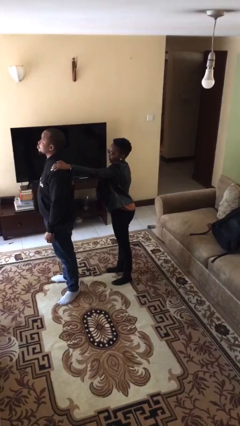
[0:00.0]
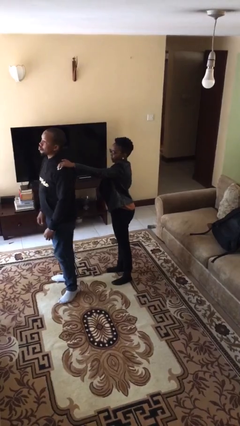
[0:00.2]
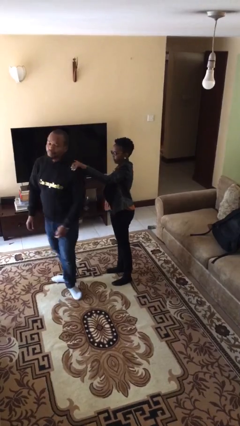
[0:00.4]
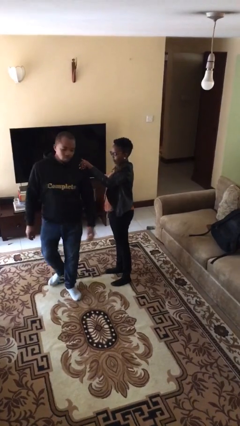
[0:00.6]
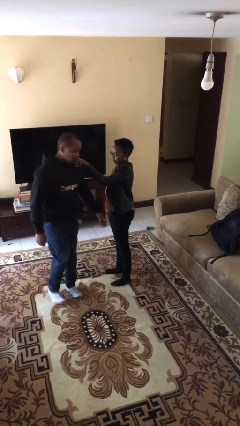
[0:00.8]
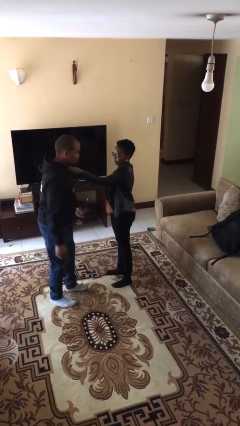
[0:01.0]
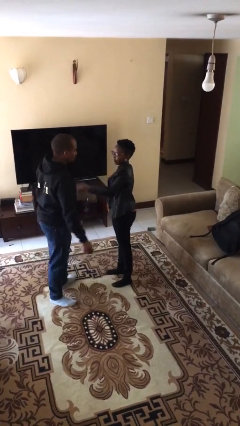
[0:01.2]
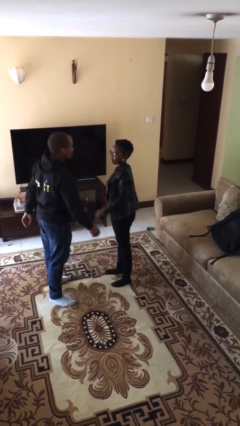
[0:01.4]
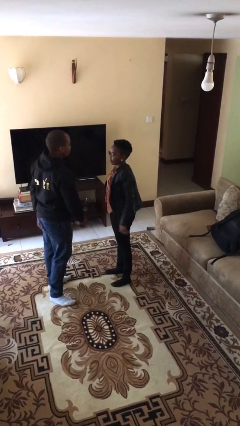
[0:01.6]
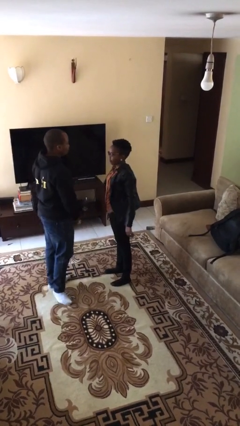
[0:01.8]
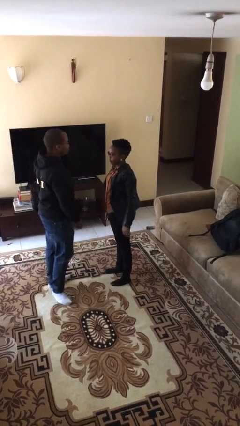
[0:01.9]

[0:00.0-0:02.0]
person spins person around

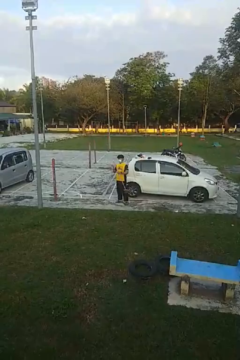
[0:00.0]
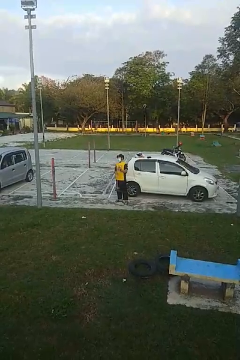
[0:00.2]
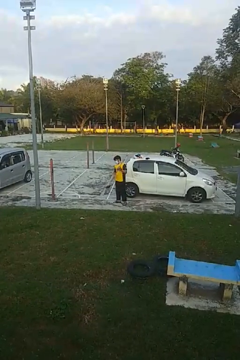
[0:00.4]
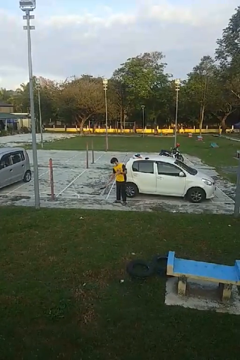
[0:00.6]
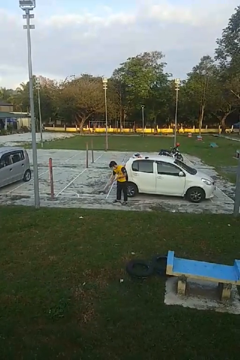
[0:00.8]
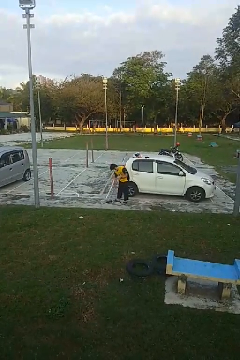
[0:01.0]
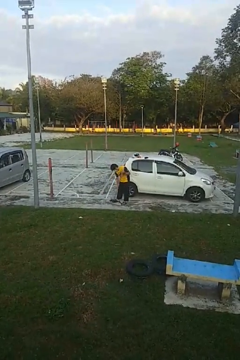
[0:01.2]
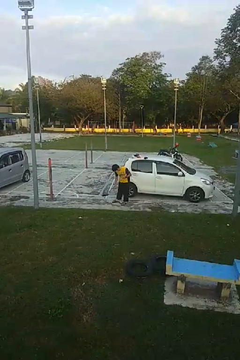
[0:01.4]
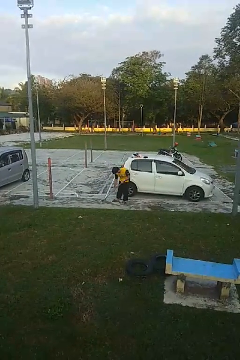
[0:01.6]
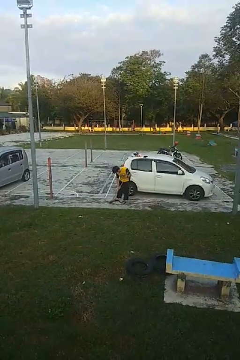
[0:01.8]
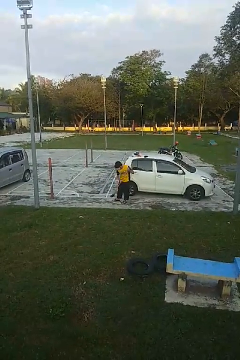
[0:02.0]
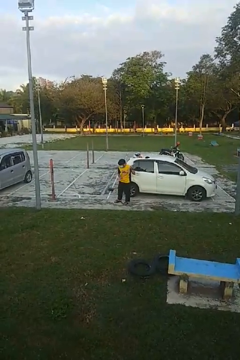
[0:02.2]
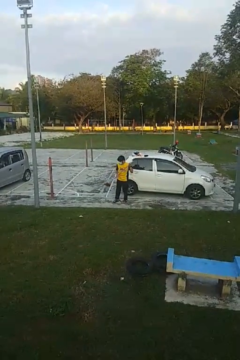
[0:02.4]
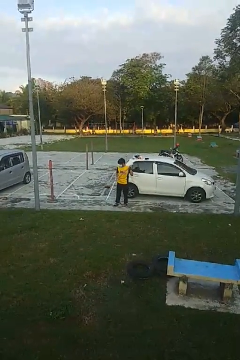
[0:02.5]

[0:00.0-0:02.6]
person sweeps floor

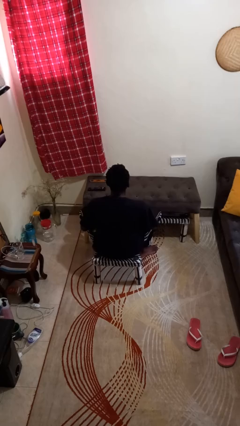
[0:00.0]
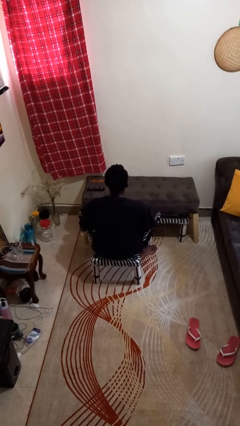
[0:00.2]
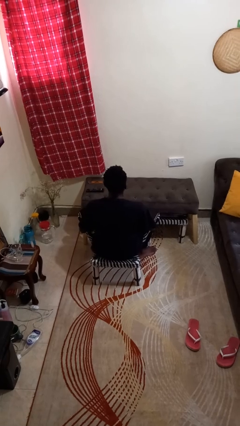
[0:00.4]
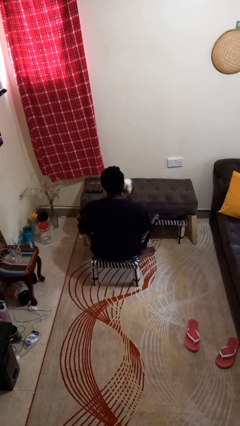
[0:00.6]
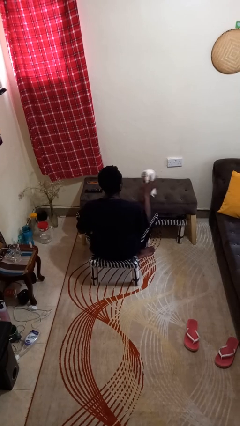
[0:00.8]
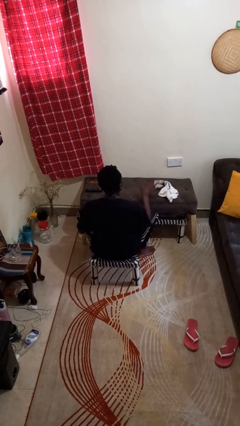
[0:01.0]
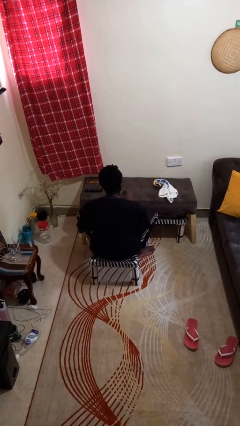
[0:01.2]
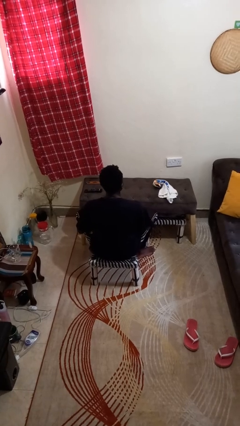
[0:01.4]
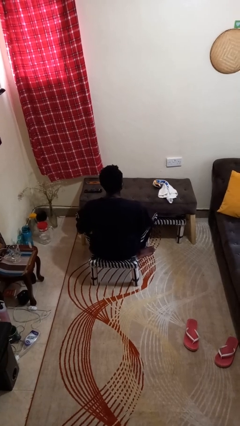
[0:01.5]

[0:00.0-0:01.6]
person throws object on table

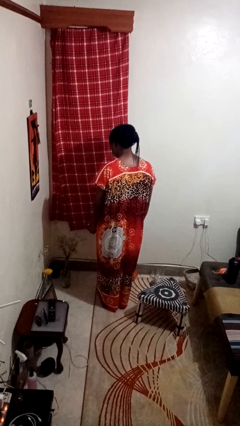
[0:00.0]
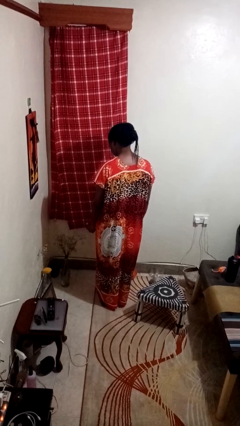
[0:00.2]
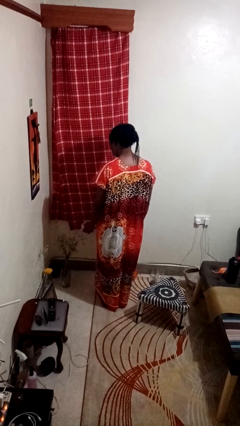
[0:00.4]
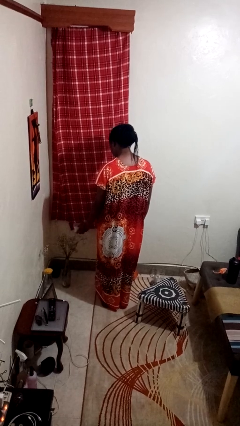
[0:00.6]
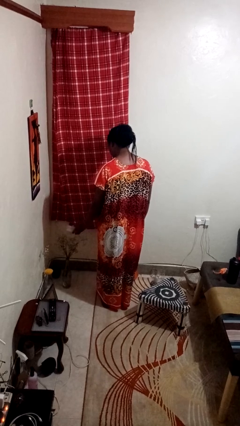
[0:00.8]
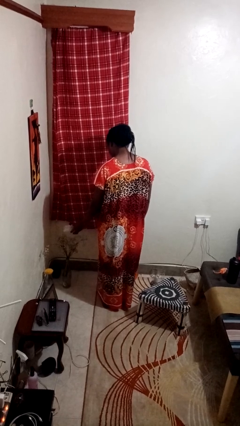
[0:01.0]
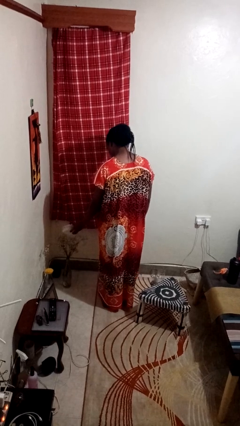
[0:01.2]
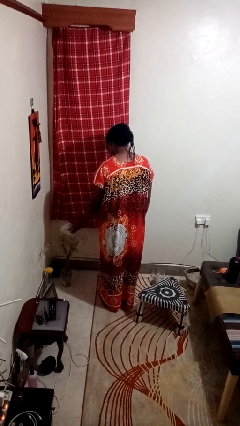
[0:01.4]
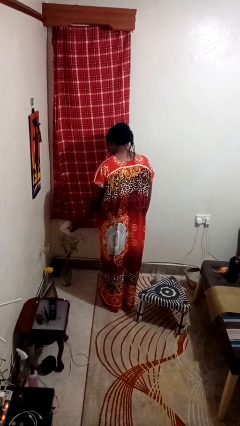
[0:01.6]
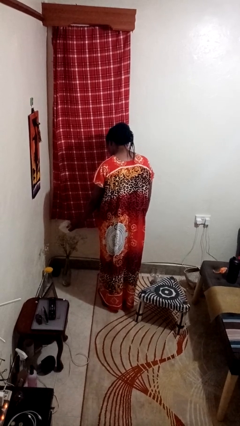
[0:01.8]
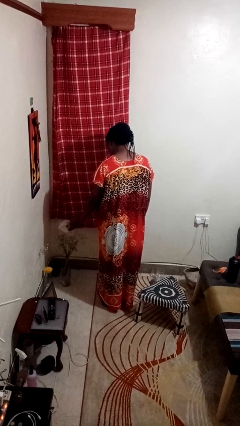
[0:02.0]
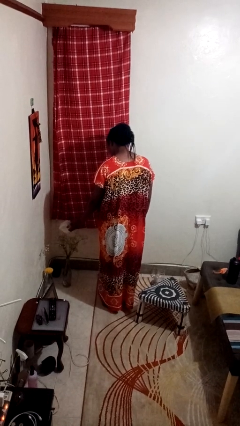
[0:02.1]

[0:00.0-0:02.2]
person waters houseplant

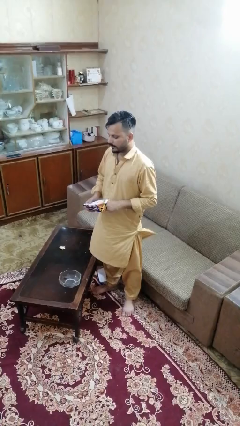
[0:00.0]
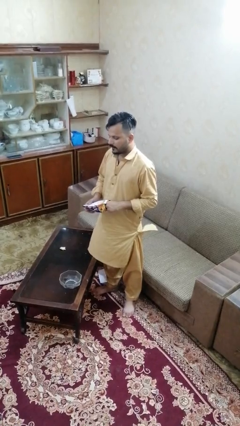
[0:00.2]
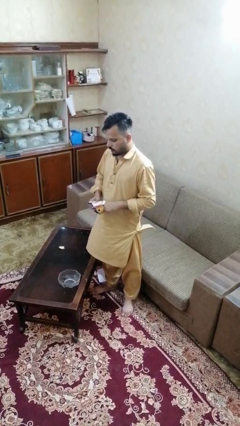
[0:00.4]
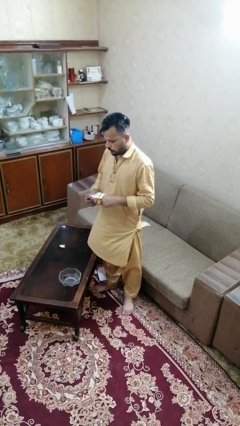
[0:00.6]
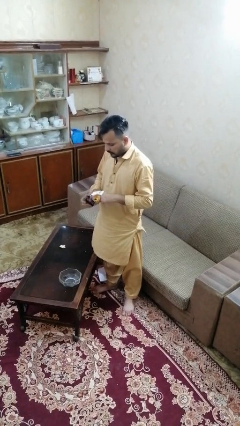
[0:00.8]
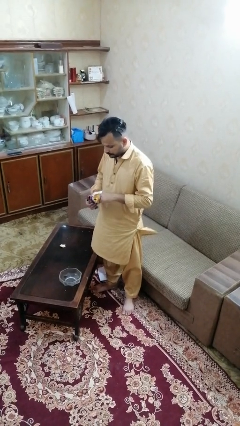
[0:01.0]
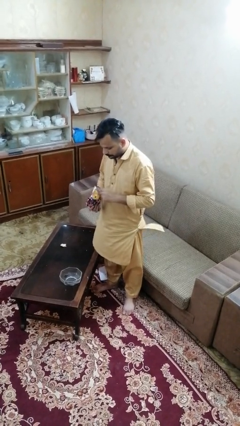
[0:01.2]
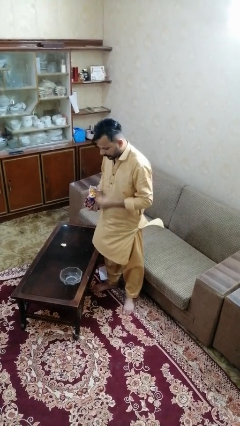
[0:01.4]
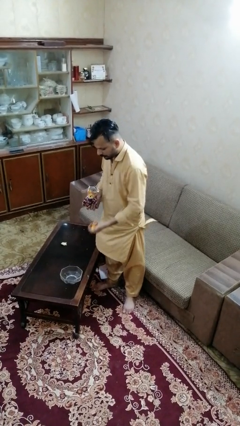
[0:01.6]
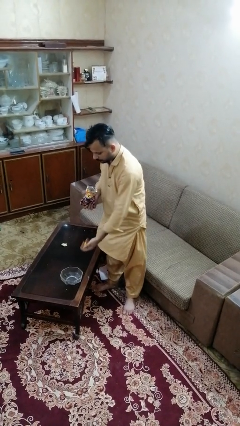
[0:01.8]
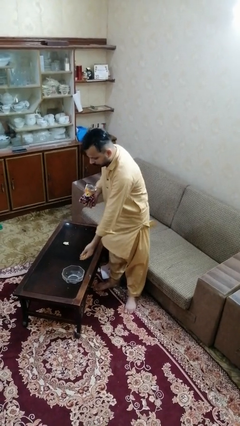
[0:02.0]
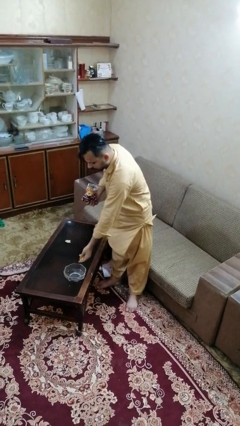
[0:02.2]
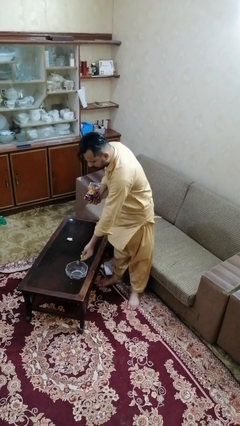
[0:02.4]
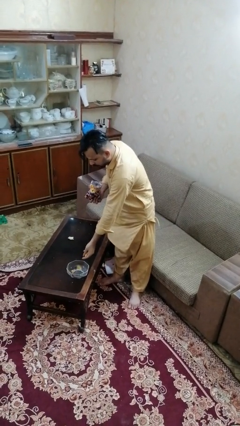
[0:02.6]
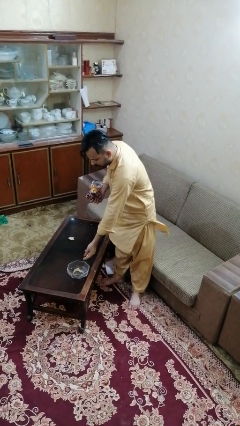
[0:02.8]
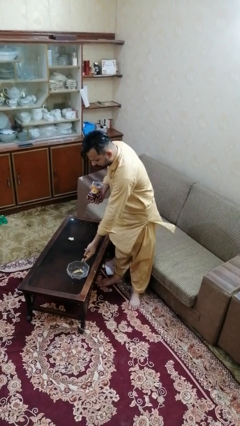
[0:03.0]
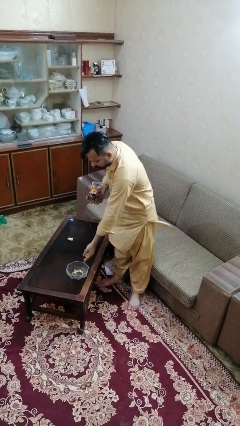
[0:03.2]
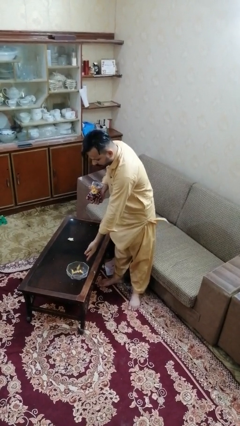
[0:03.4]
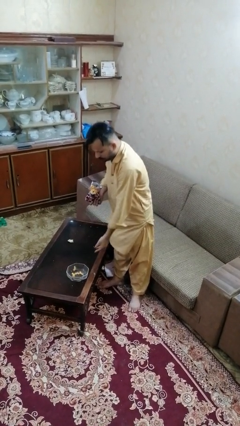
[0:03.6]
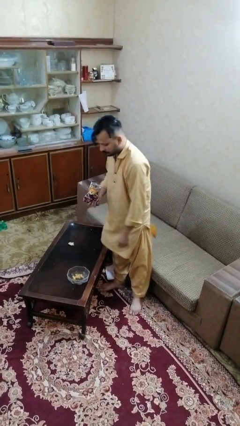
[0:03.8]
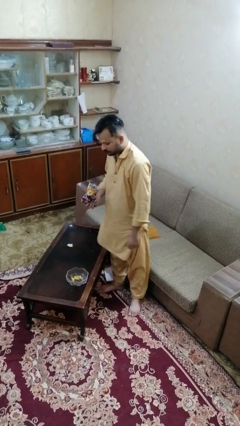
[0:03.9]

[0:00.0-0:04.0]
person pours into bowl

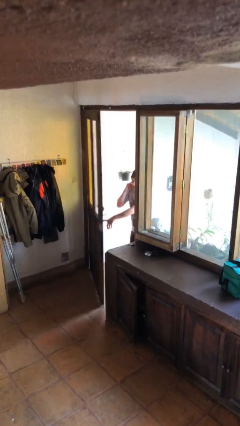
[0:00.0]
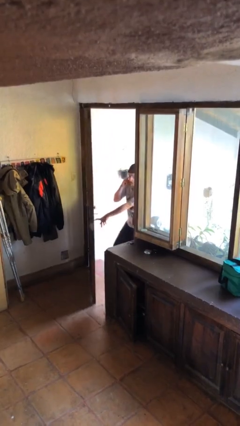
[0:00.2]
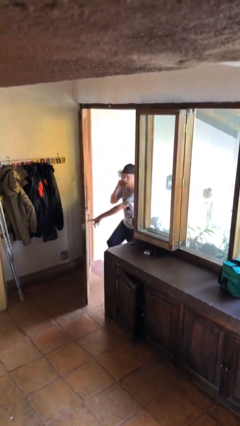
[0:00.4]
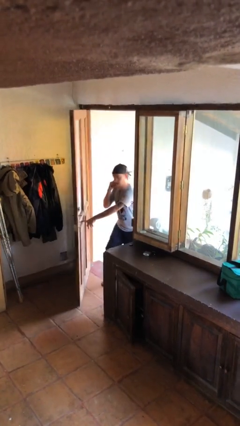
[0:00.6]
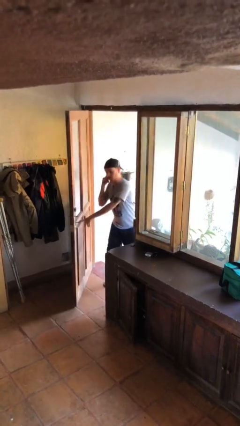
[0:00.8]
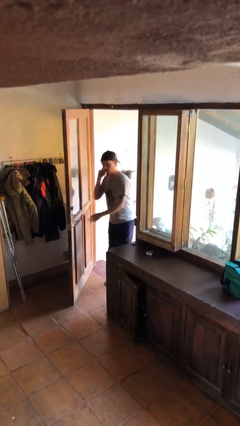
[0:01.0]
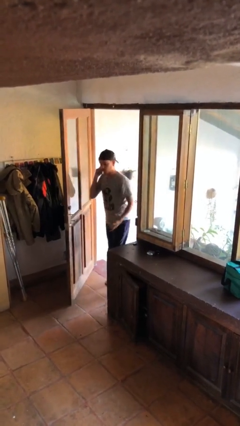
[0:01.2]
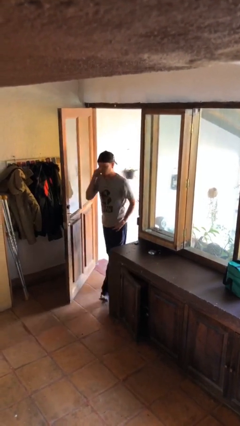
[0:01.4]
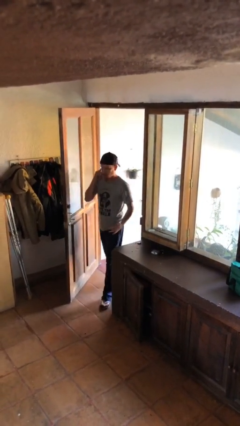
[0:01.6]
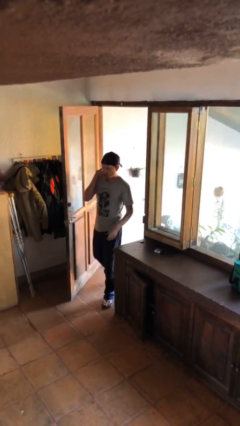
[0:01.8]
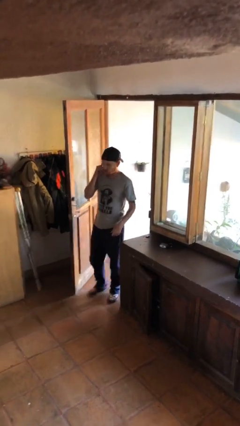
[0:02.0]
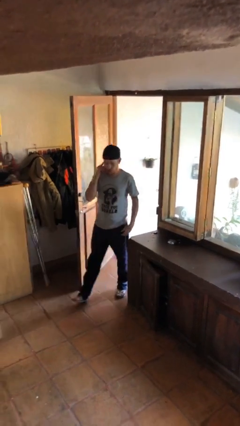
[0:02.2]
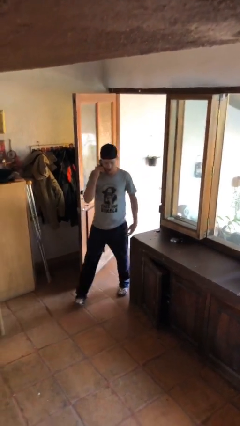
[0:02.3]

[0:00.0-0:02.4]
person enters scene through structure

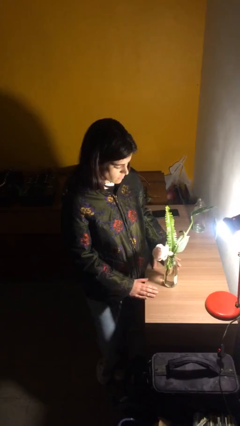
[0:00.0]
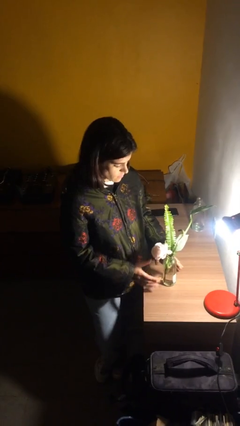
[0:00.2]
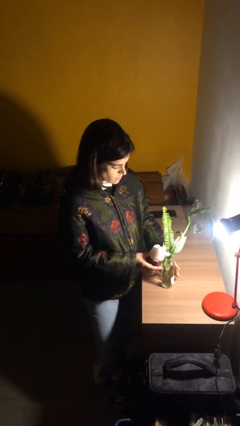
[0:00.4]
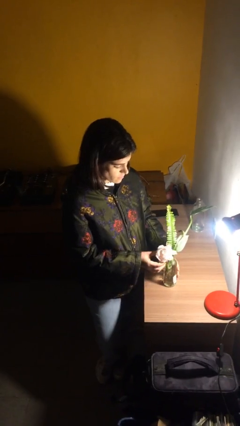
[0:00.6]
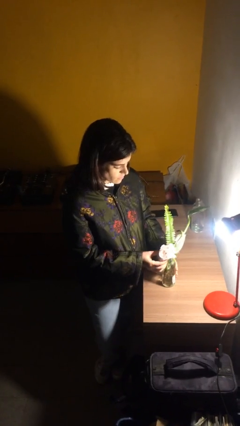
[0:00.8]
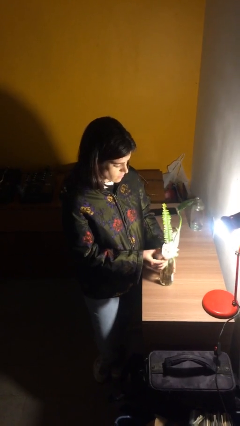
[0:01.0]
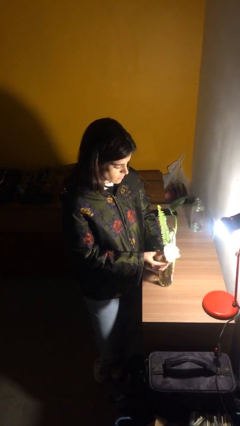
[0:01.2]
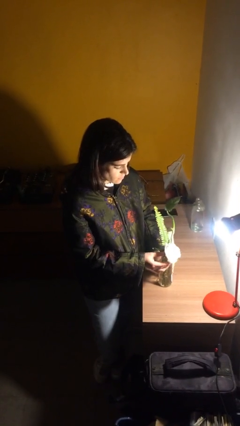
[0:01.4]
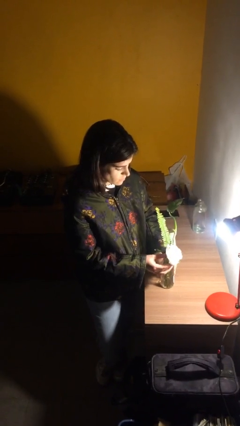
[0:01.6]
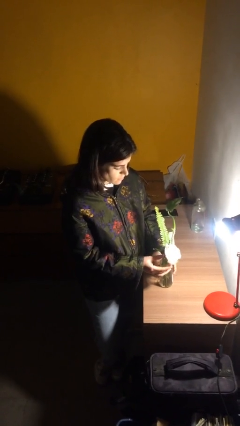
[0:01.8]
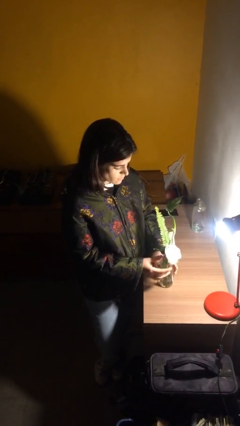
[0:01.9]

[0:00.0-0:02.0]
person arranges flowers in vase

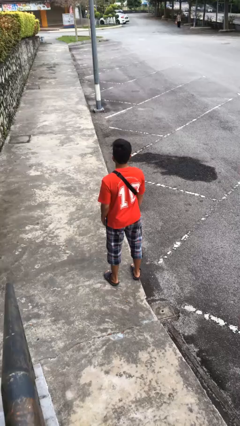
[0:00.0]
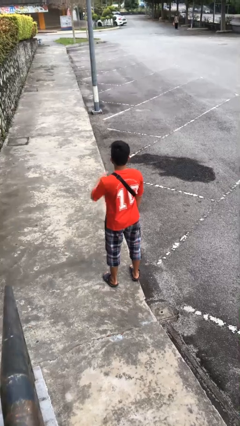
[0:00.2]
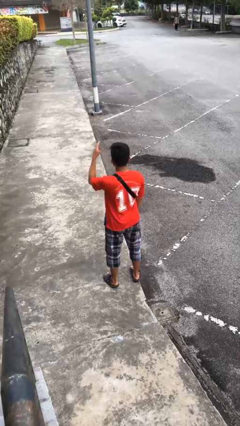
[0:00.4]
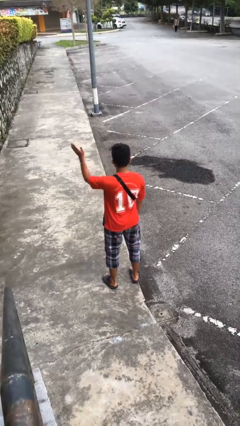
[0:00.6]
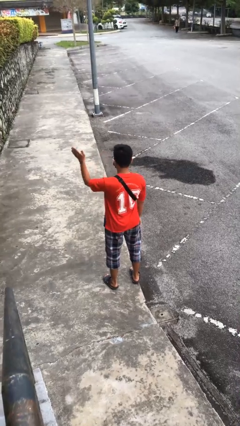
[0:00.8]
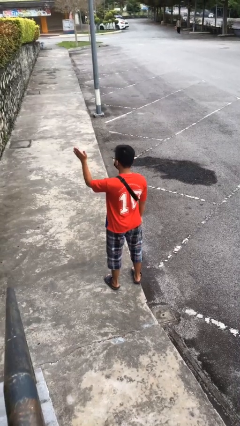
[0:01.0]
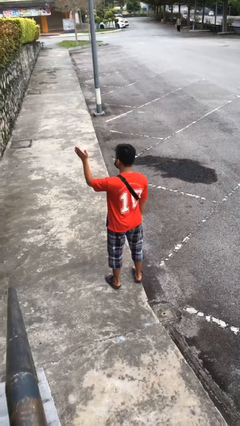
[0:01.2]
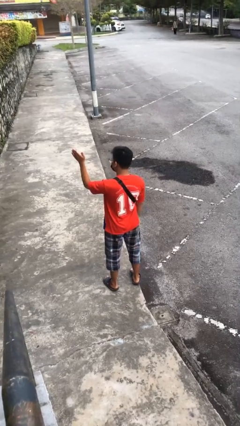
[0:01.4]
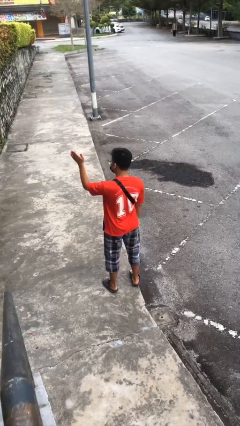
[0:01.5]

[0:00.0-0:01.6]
person gestures swipe left
